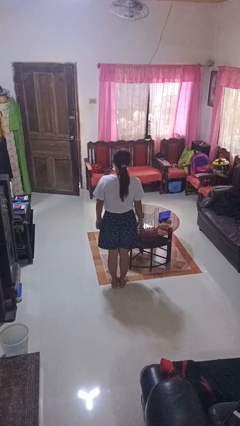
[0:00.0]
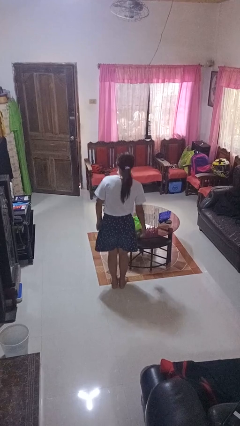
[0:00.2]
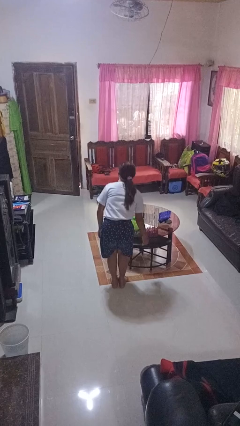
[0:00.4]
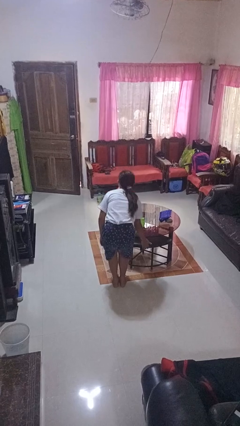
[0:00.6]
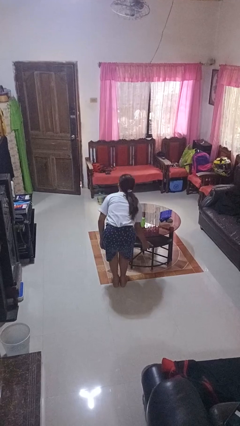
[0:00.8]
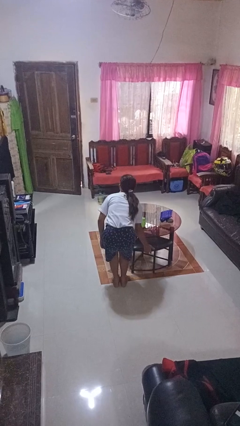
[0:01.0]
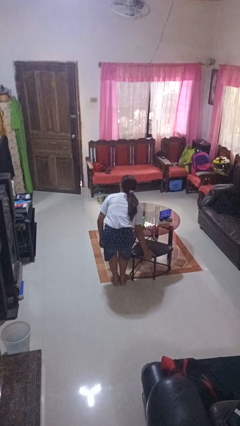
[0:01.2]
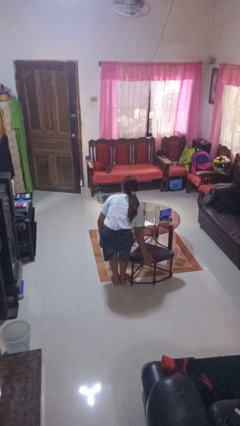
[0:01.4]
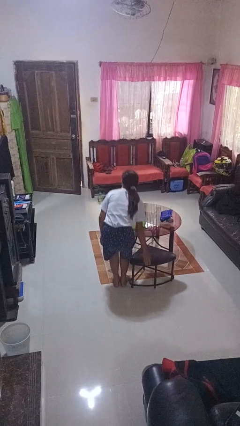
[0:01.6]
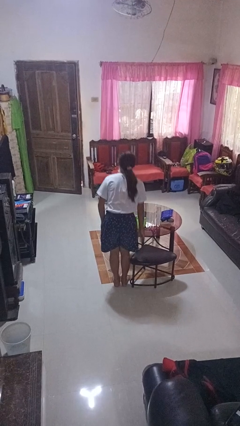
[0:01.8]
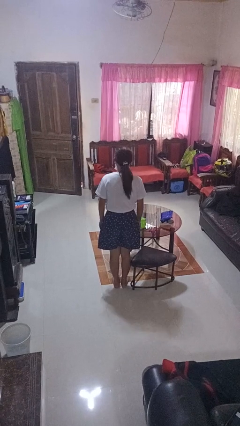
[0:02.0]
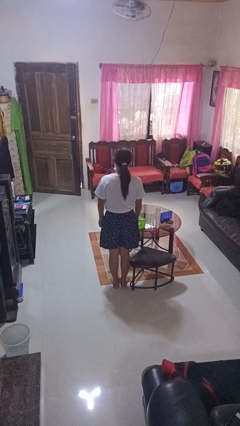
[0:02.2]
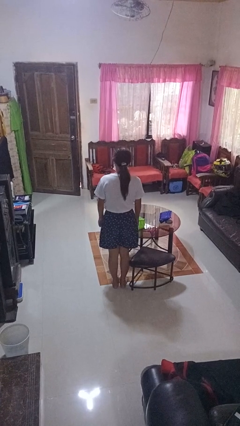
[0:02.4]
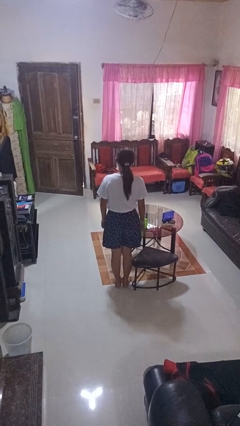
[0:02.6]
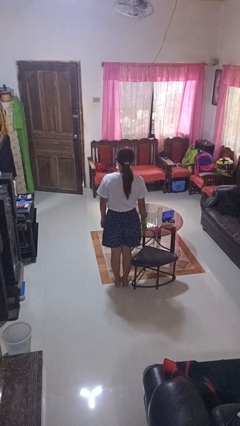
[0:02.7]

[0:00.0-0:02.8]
person pulls out chair

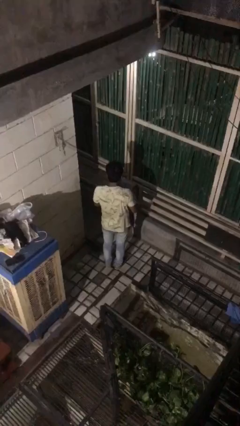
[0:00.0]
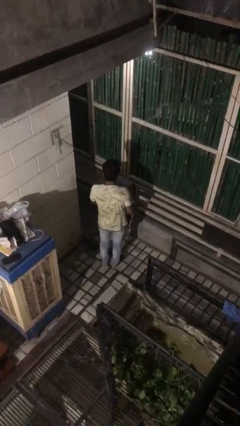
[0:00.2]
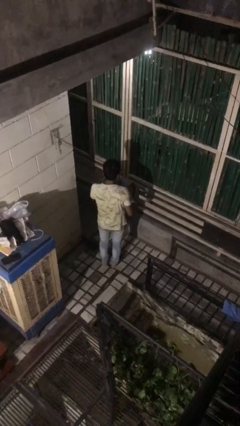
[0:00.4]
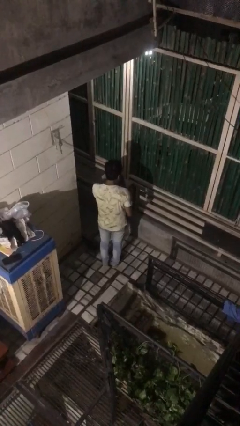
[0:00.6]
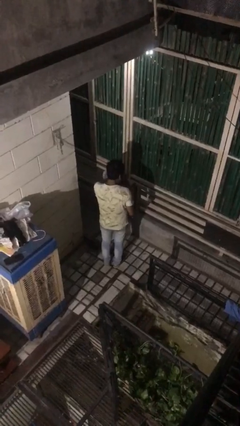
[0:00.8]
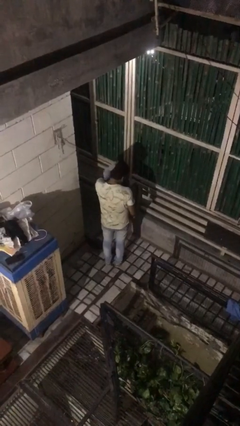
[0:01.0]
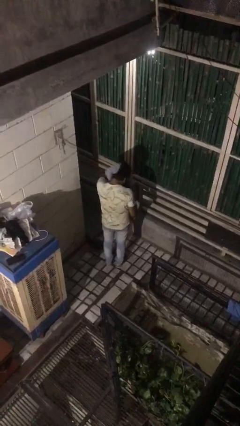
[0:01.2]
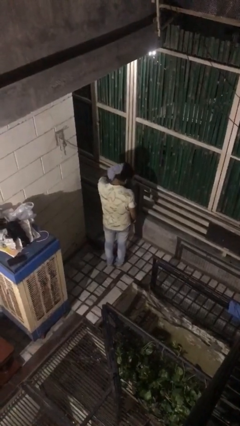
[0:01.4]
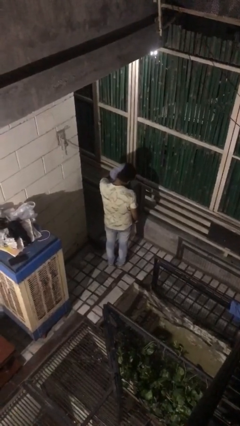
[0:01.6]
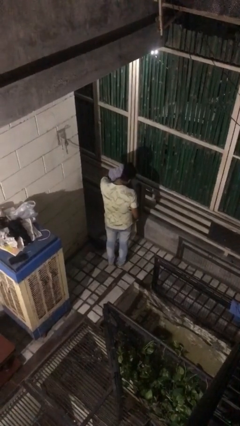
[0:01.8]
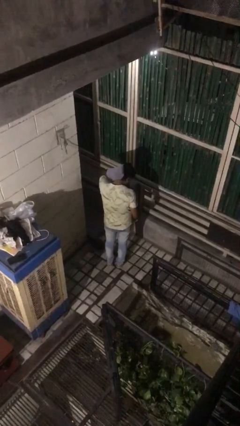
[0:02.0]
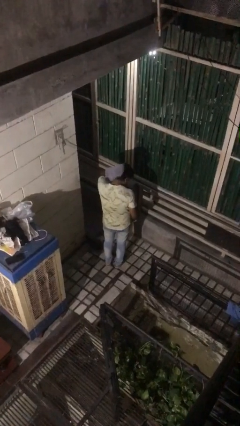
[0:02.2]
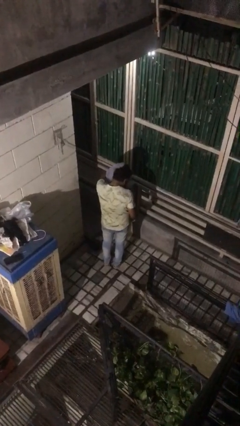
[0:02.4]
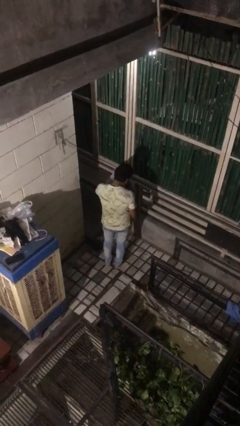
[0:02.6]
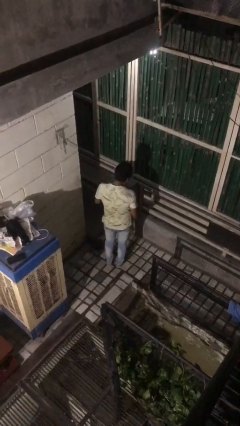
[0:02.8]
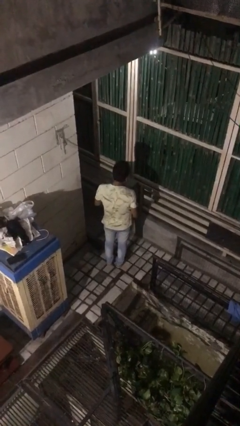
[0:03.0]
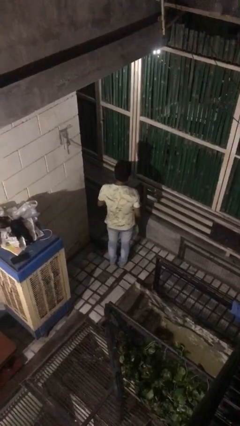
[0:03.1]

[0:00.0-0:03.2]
person dries hair with towel

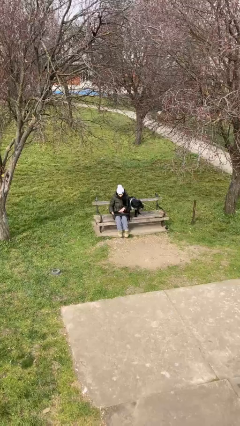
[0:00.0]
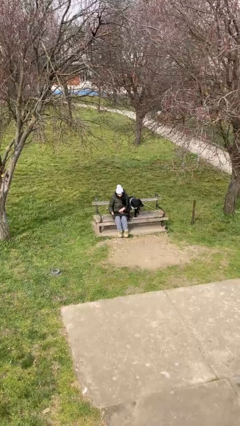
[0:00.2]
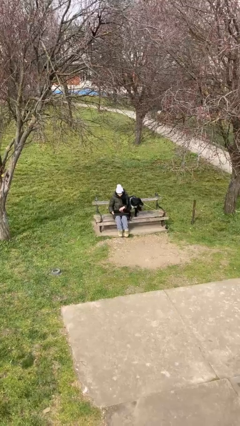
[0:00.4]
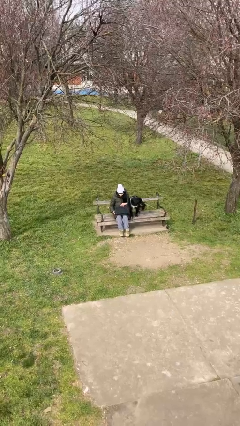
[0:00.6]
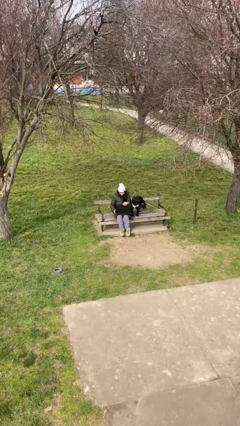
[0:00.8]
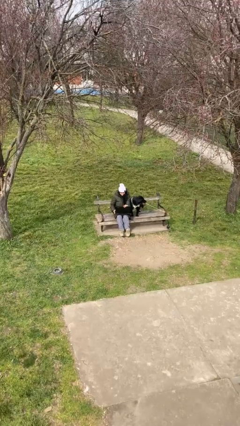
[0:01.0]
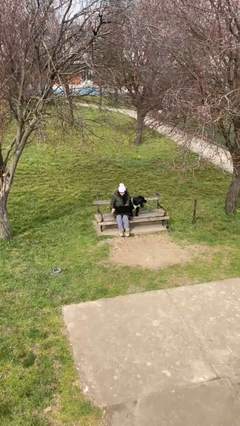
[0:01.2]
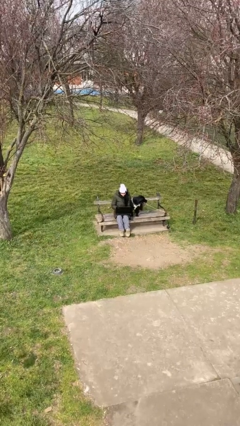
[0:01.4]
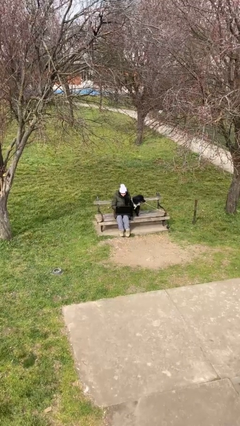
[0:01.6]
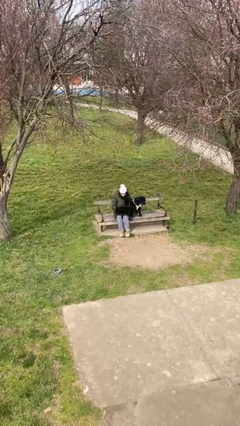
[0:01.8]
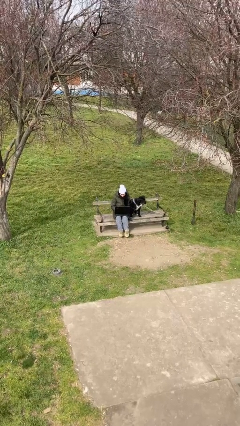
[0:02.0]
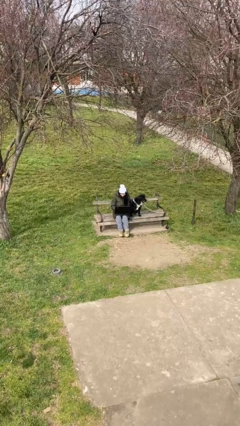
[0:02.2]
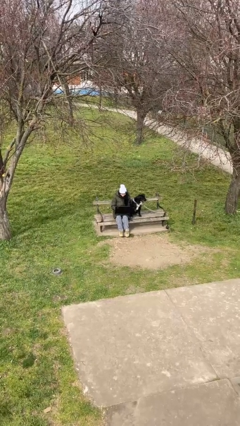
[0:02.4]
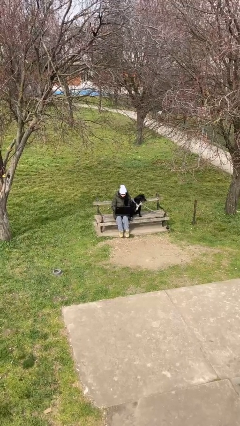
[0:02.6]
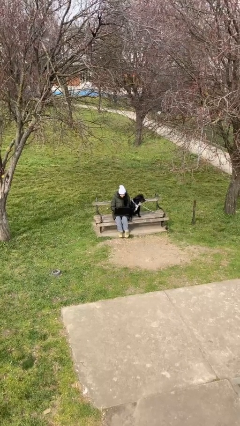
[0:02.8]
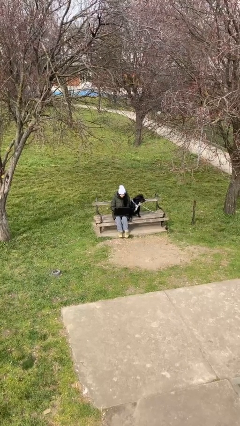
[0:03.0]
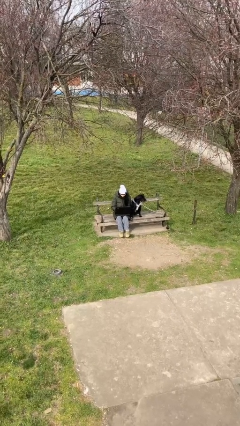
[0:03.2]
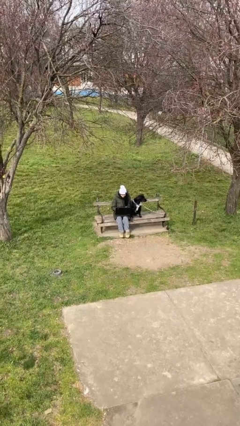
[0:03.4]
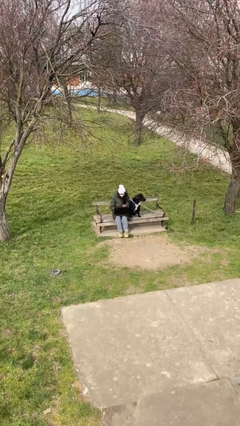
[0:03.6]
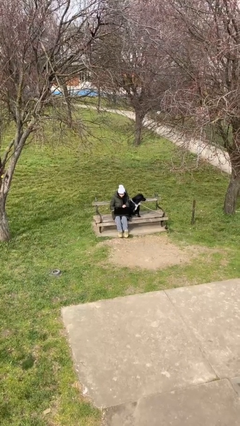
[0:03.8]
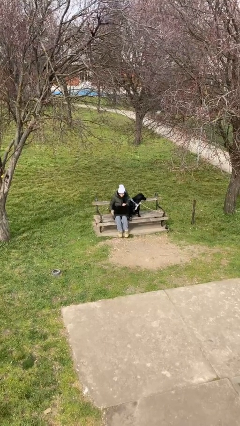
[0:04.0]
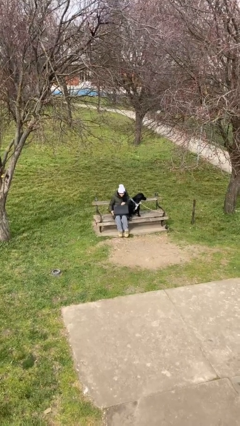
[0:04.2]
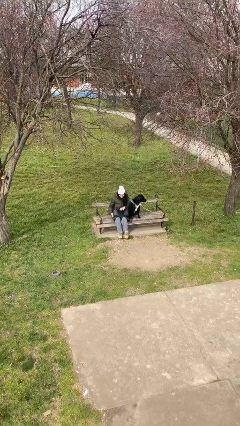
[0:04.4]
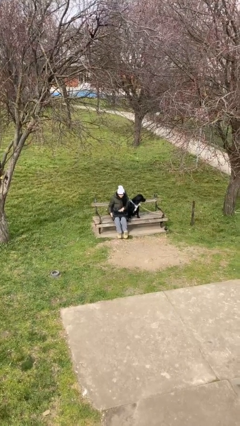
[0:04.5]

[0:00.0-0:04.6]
person interacts with laptop

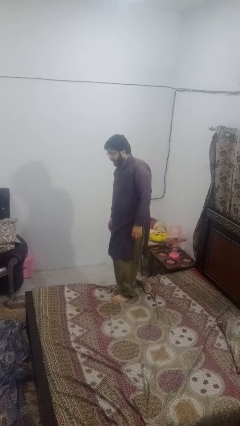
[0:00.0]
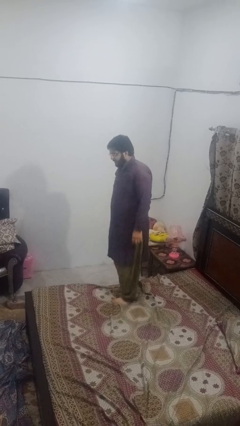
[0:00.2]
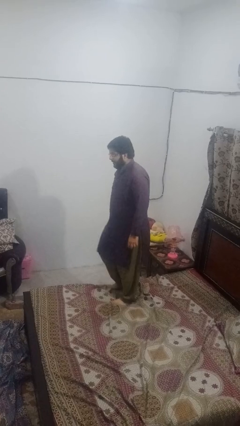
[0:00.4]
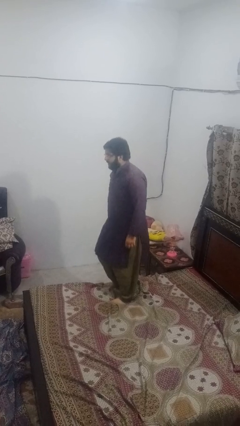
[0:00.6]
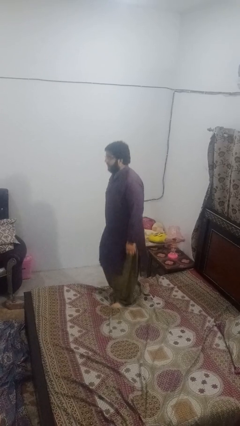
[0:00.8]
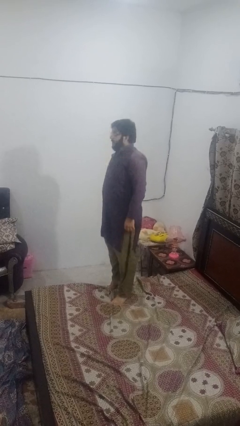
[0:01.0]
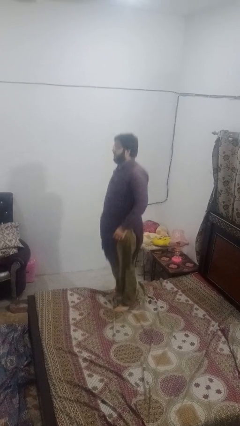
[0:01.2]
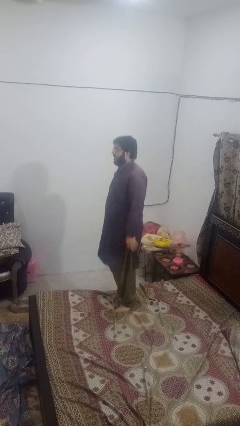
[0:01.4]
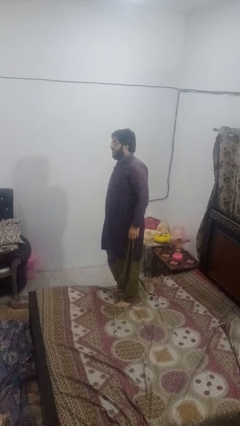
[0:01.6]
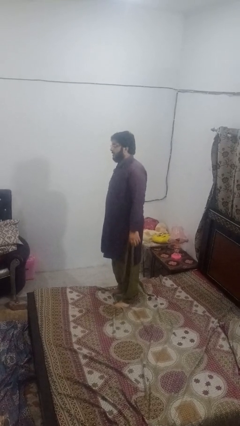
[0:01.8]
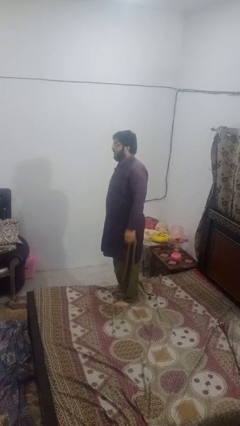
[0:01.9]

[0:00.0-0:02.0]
person jumps on bed

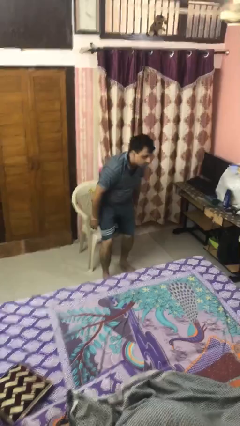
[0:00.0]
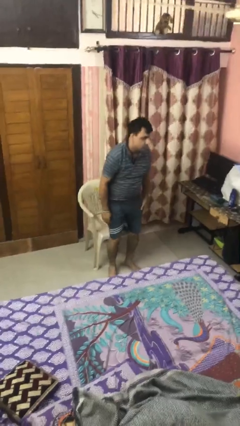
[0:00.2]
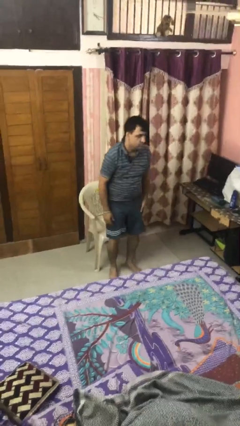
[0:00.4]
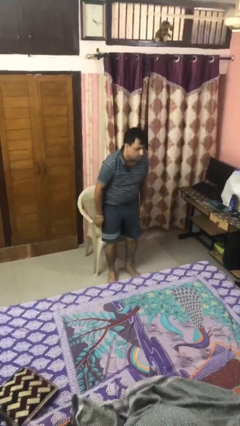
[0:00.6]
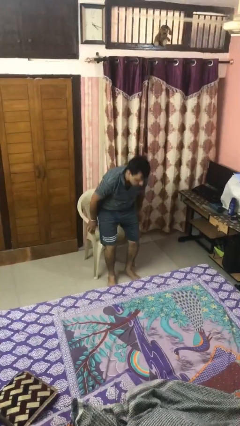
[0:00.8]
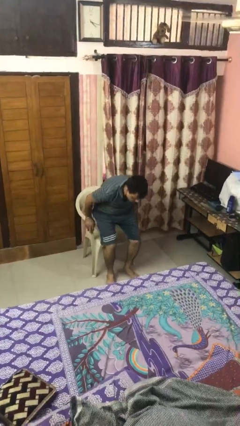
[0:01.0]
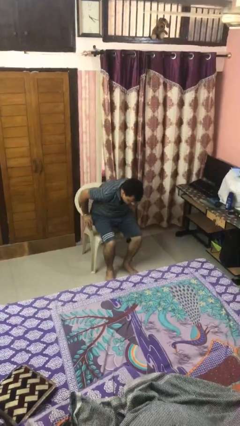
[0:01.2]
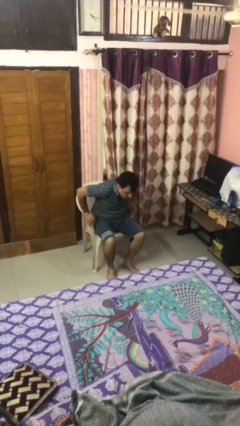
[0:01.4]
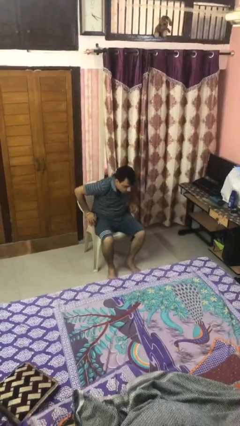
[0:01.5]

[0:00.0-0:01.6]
person sits down

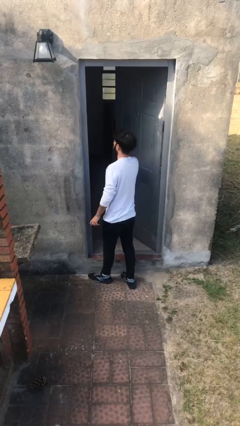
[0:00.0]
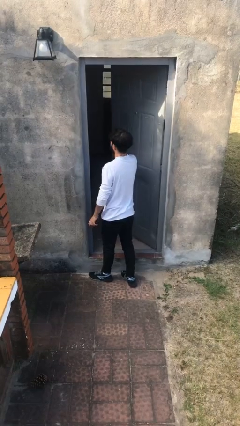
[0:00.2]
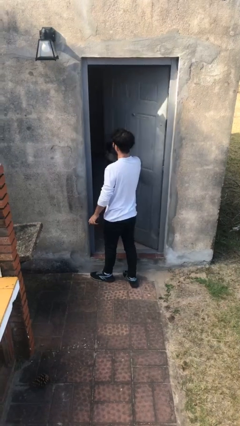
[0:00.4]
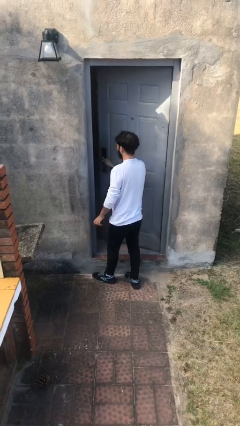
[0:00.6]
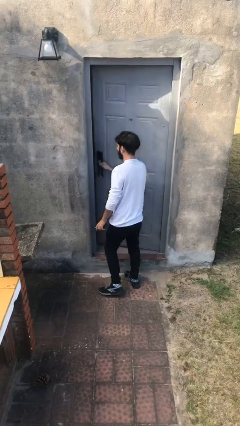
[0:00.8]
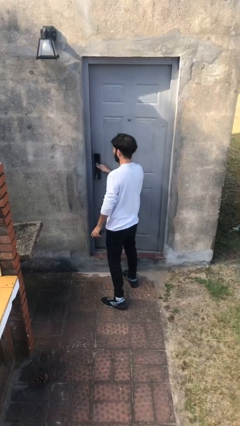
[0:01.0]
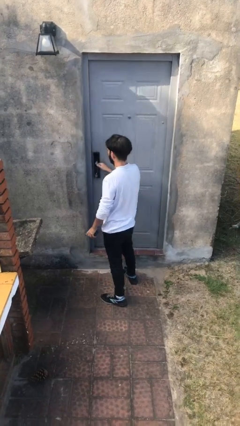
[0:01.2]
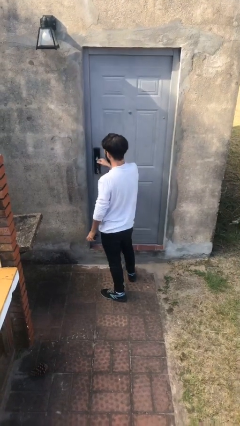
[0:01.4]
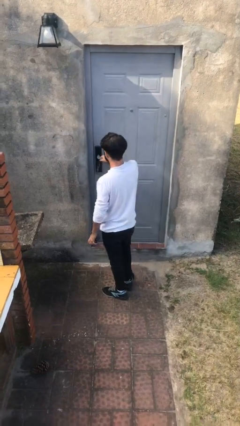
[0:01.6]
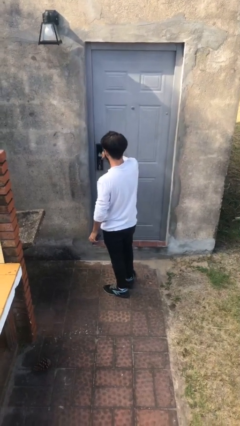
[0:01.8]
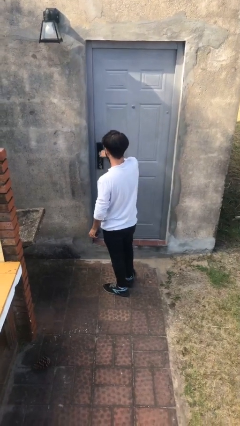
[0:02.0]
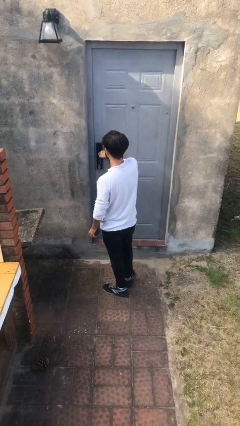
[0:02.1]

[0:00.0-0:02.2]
person closes facility door

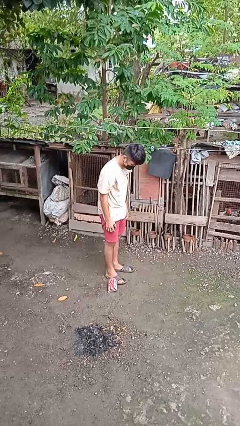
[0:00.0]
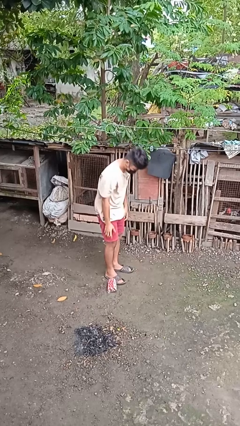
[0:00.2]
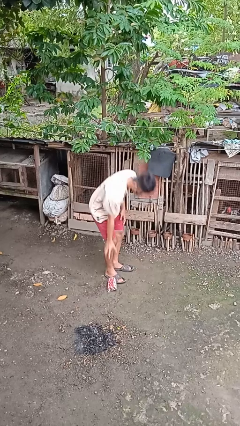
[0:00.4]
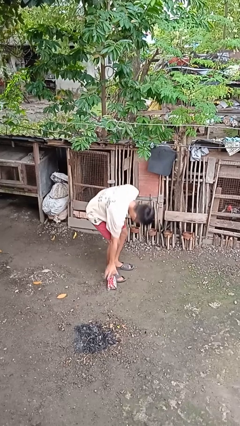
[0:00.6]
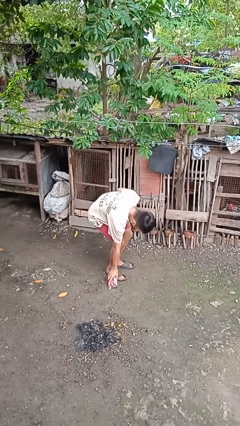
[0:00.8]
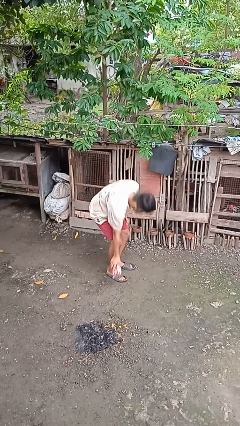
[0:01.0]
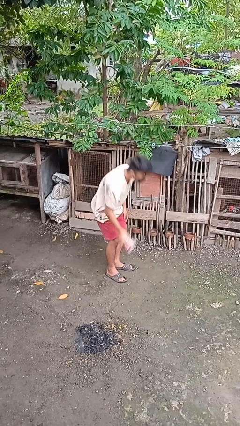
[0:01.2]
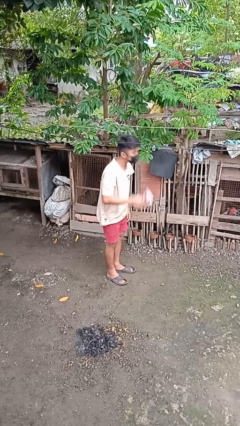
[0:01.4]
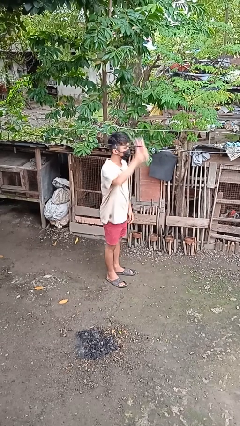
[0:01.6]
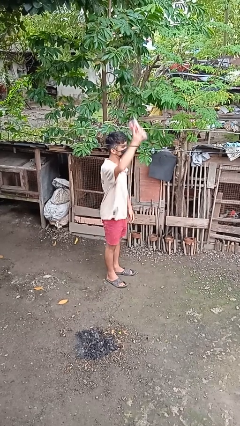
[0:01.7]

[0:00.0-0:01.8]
person picks up object from floor
